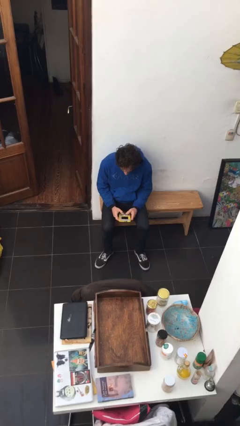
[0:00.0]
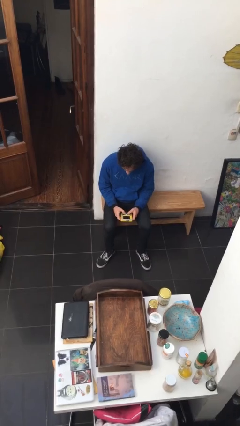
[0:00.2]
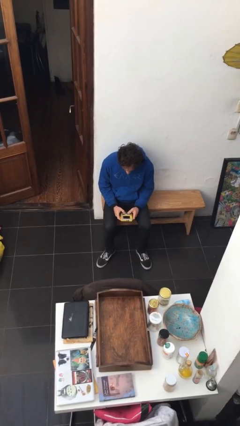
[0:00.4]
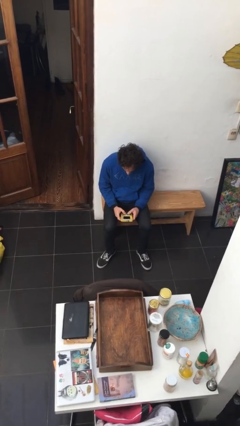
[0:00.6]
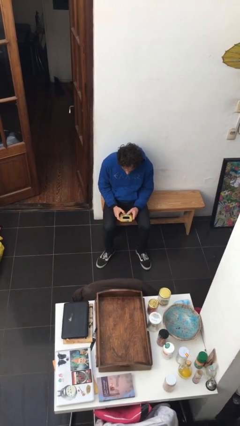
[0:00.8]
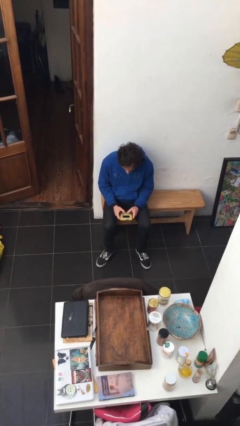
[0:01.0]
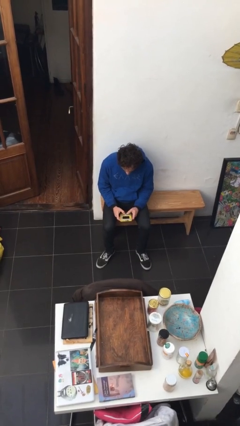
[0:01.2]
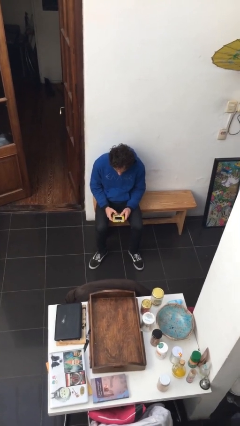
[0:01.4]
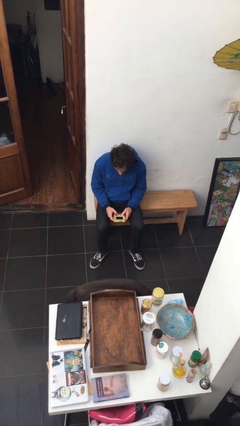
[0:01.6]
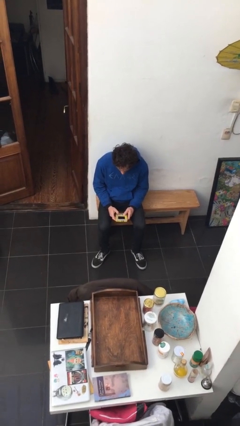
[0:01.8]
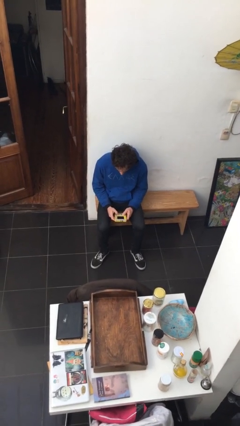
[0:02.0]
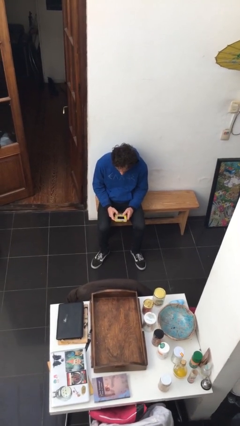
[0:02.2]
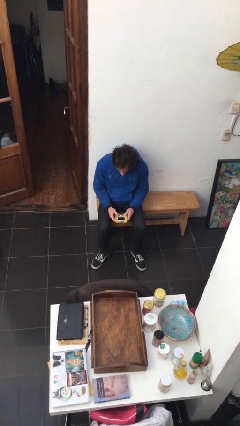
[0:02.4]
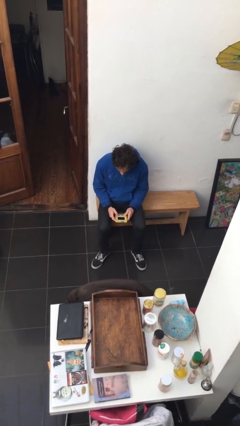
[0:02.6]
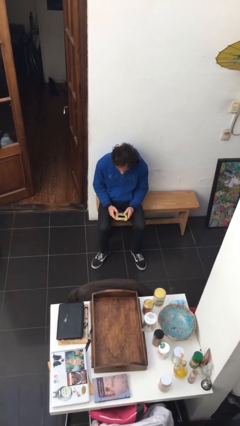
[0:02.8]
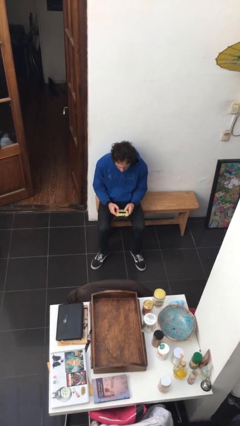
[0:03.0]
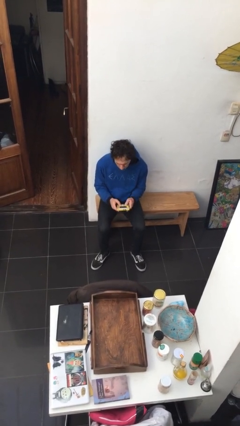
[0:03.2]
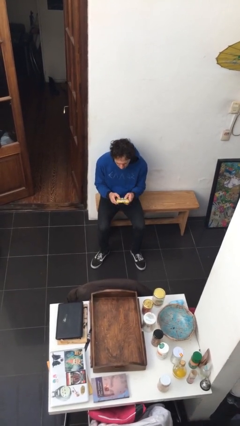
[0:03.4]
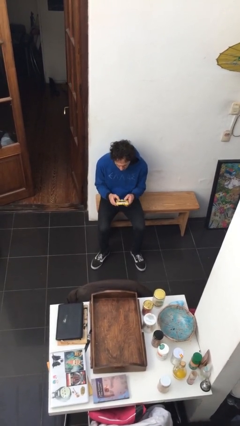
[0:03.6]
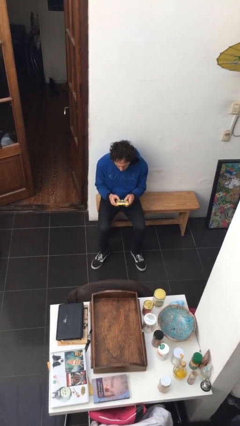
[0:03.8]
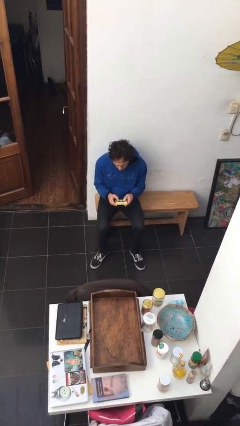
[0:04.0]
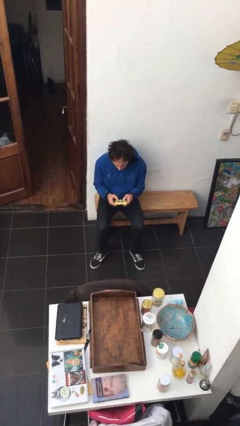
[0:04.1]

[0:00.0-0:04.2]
person interacts with handheld game

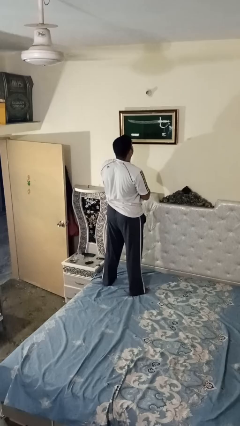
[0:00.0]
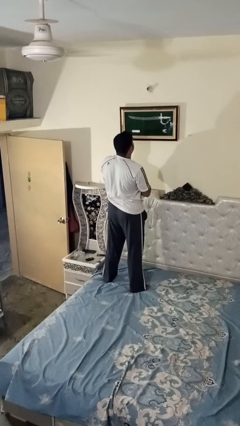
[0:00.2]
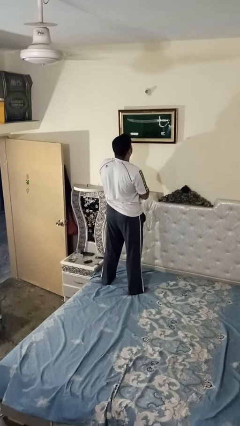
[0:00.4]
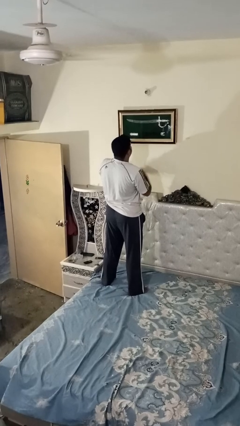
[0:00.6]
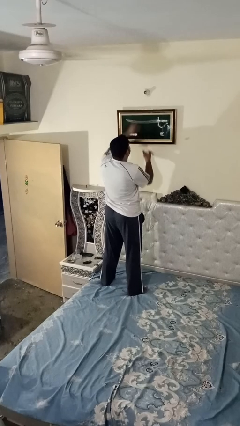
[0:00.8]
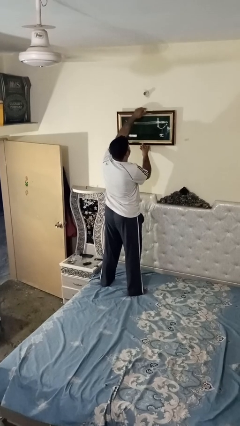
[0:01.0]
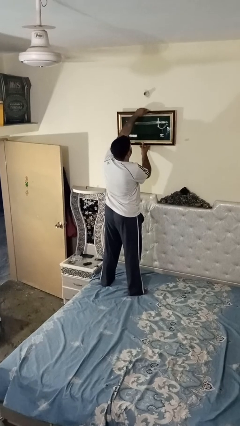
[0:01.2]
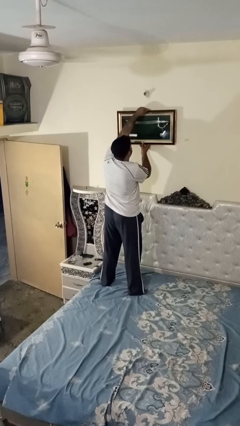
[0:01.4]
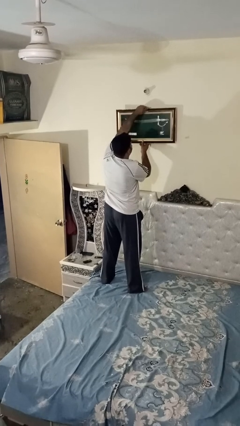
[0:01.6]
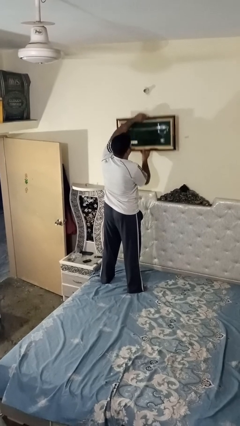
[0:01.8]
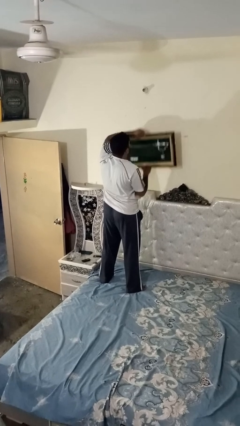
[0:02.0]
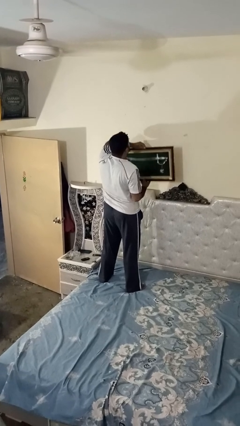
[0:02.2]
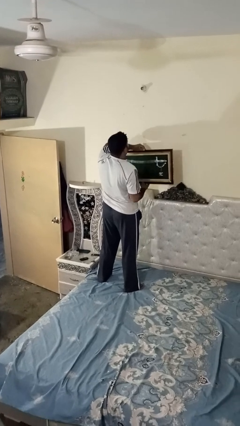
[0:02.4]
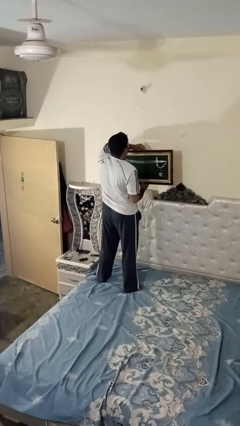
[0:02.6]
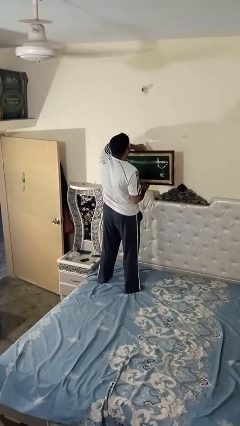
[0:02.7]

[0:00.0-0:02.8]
person takes down picture frame

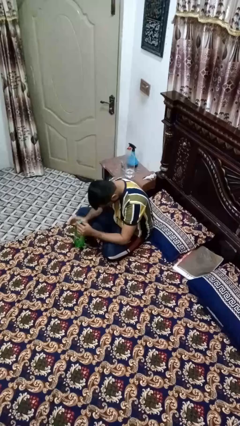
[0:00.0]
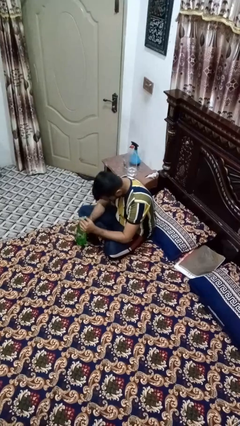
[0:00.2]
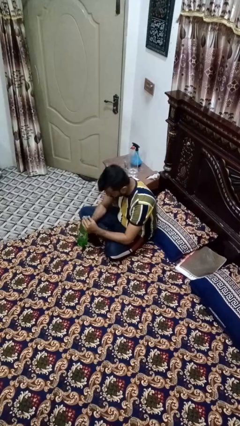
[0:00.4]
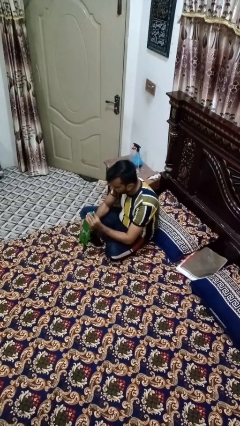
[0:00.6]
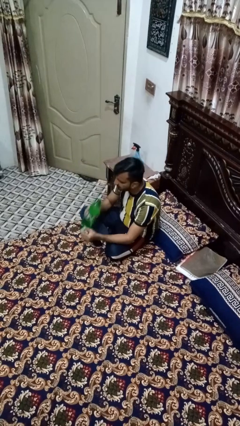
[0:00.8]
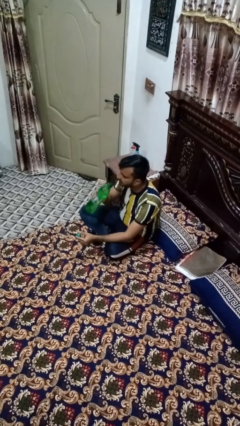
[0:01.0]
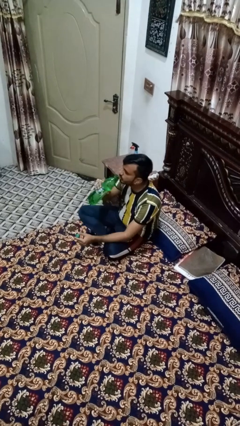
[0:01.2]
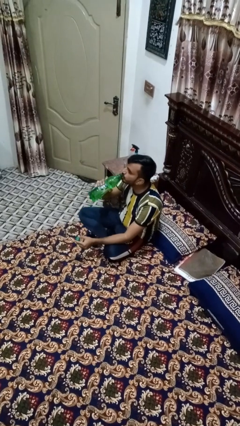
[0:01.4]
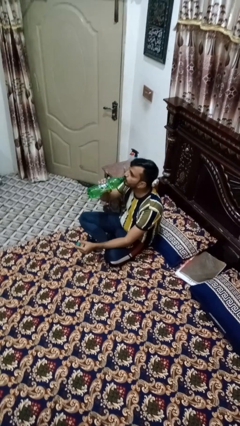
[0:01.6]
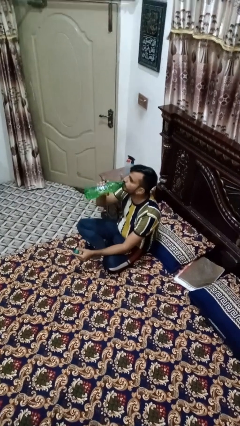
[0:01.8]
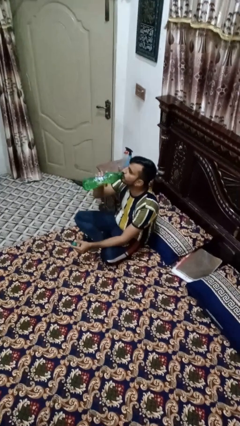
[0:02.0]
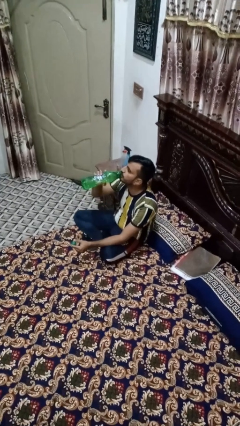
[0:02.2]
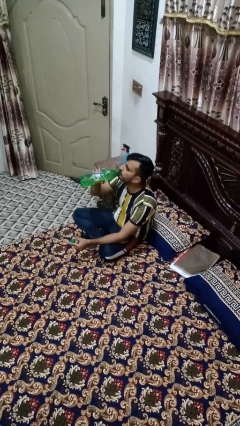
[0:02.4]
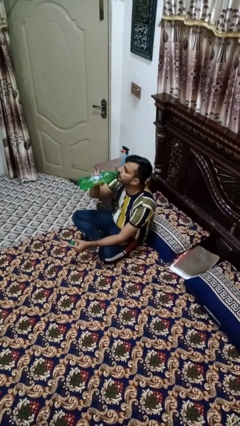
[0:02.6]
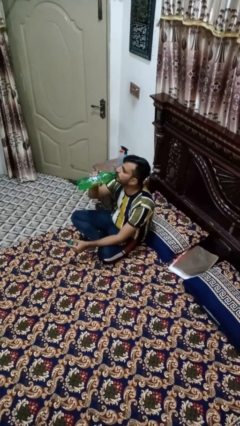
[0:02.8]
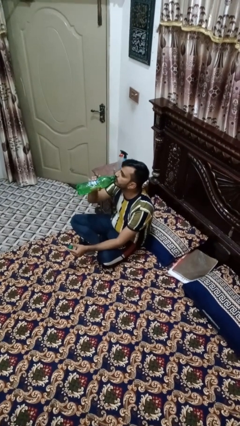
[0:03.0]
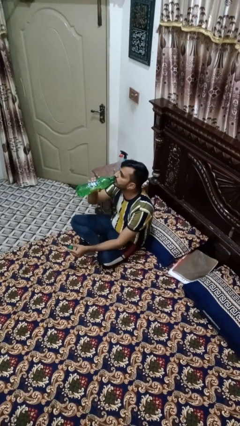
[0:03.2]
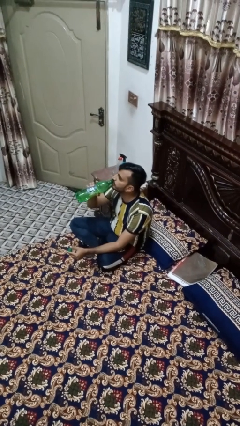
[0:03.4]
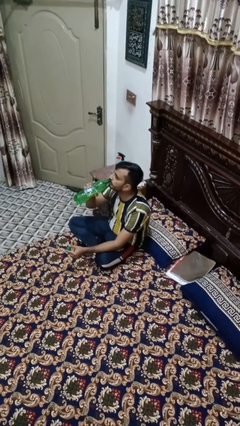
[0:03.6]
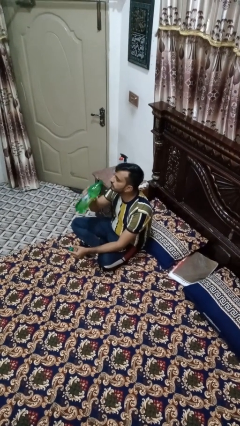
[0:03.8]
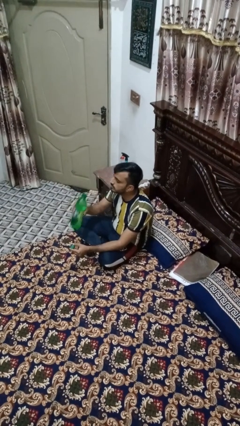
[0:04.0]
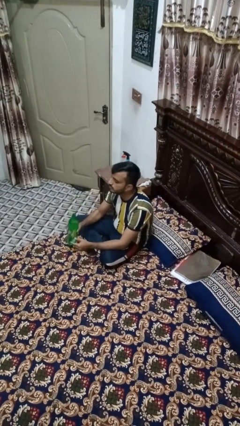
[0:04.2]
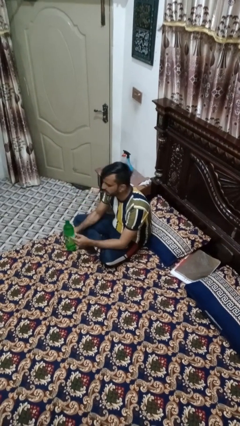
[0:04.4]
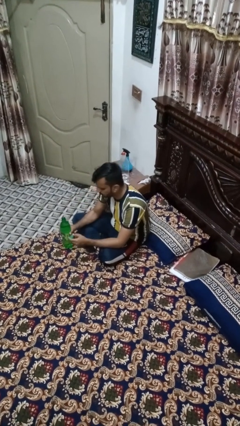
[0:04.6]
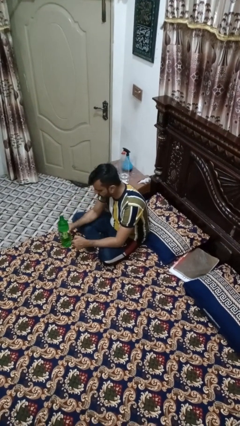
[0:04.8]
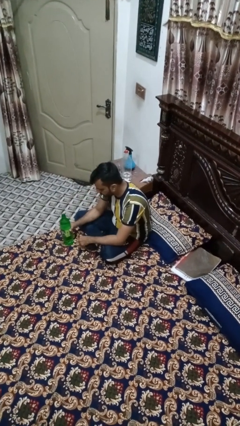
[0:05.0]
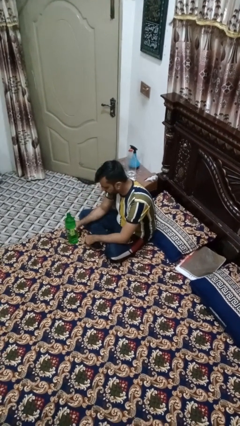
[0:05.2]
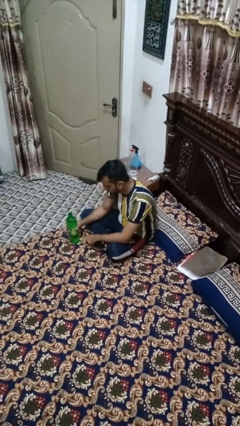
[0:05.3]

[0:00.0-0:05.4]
person drinks from bottle

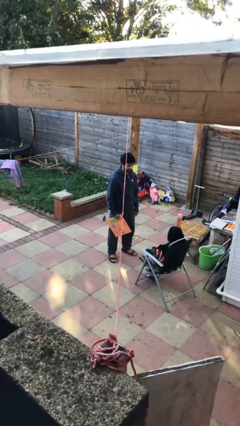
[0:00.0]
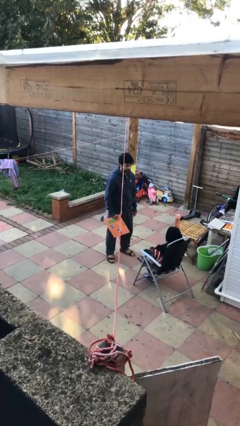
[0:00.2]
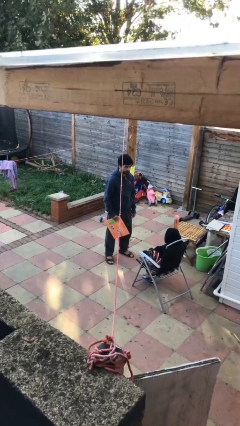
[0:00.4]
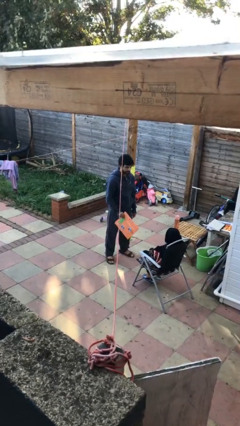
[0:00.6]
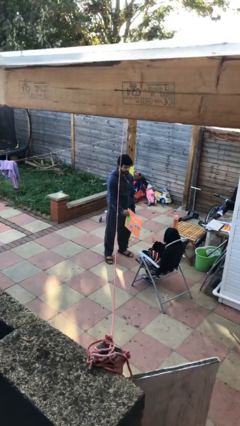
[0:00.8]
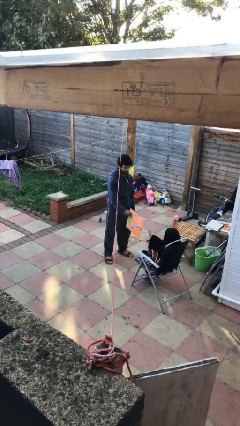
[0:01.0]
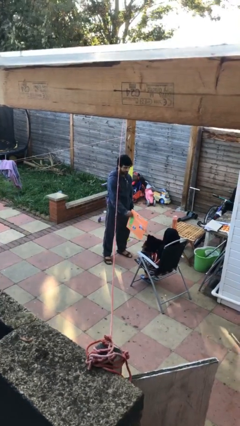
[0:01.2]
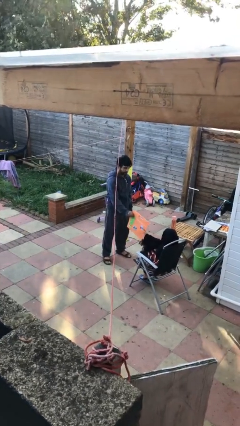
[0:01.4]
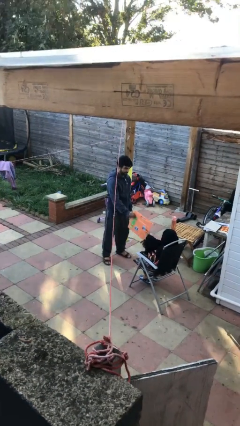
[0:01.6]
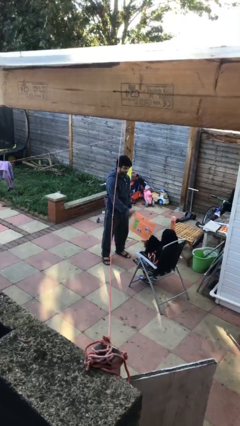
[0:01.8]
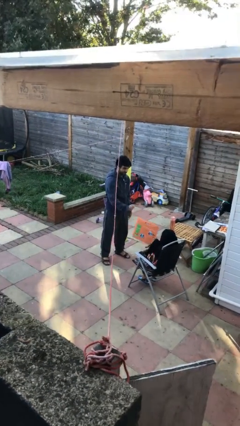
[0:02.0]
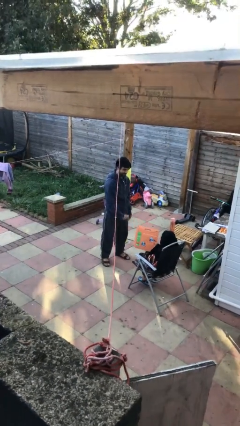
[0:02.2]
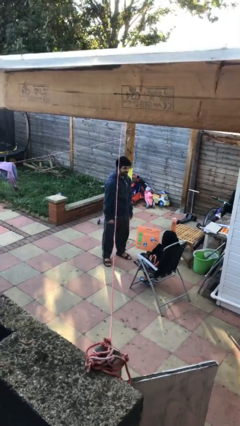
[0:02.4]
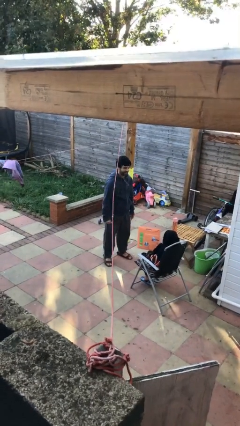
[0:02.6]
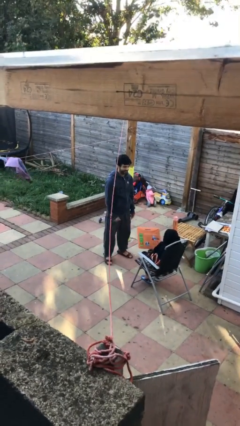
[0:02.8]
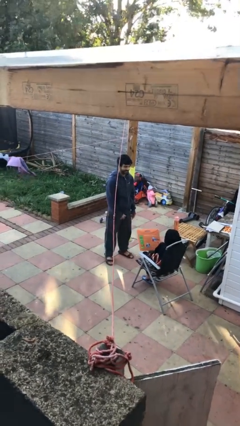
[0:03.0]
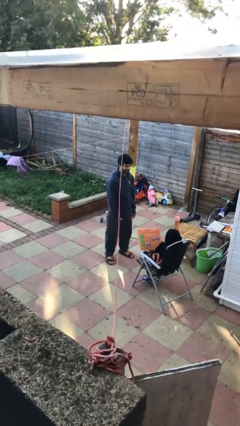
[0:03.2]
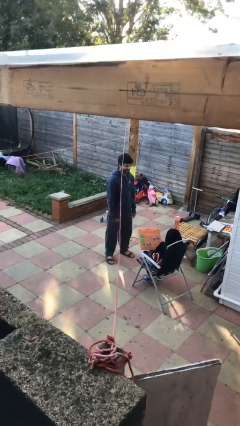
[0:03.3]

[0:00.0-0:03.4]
person transfers object to person

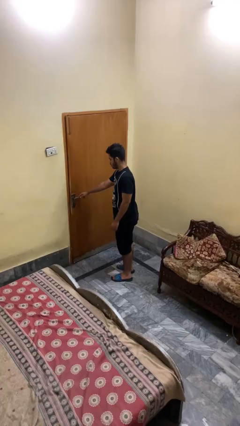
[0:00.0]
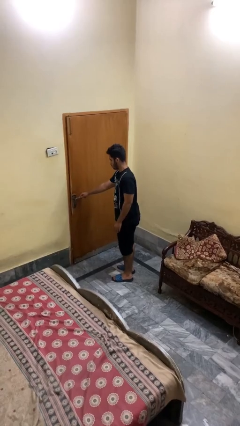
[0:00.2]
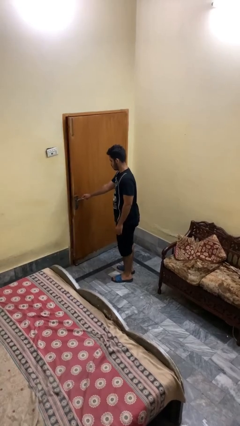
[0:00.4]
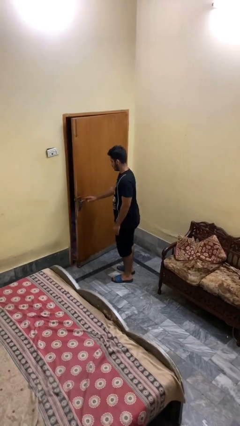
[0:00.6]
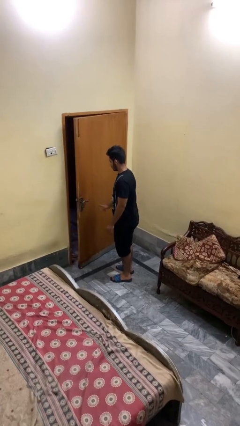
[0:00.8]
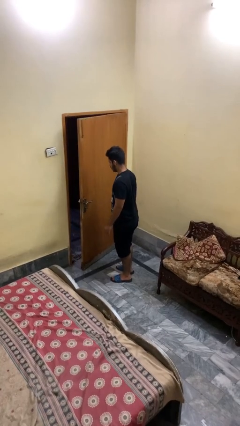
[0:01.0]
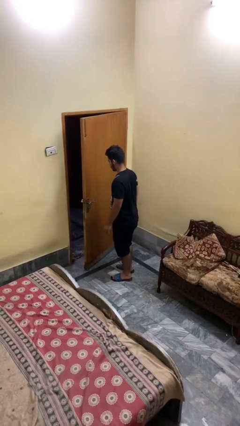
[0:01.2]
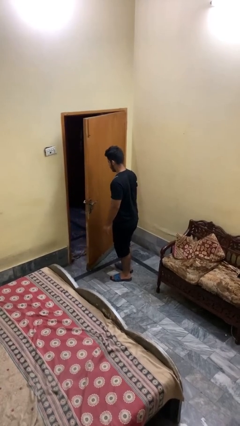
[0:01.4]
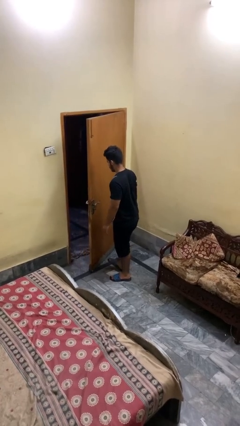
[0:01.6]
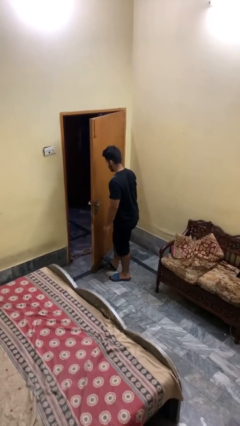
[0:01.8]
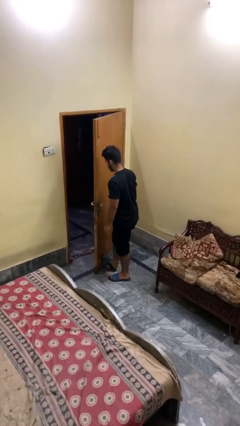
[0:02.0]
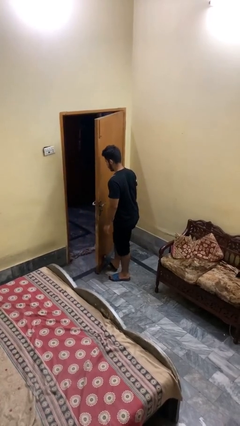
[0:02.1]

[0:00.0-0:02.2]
person opens facility door
